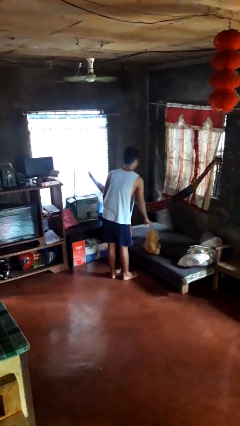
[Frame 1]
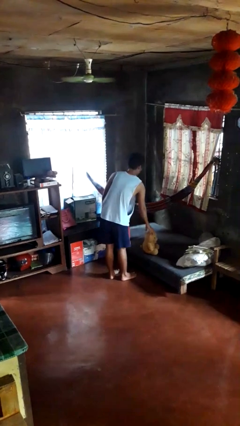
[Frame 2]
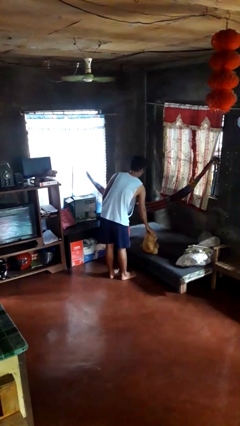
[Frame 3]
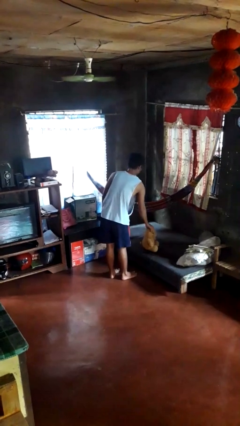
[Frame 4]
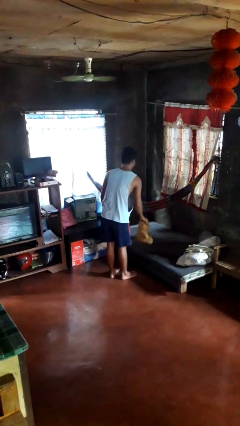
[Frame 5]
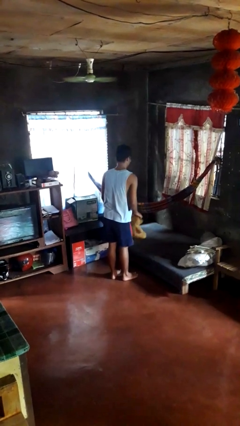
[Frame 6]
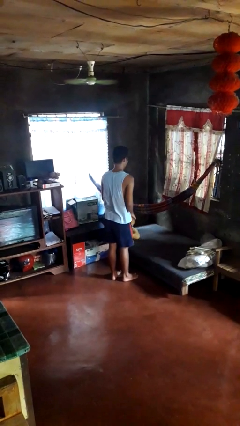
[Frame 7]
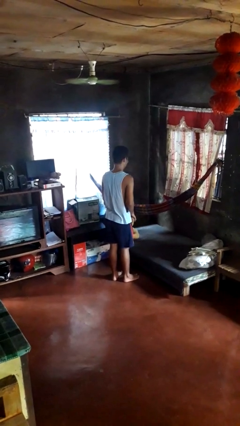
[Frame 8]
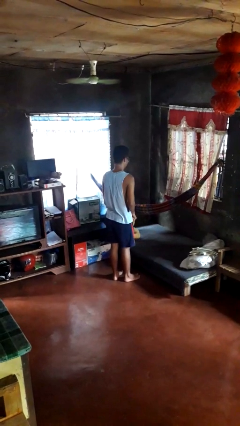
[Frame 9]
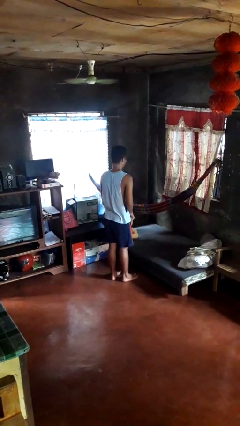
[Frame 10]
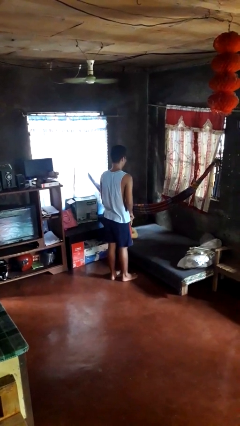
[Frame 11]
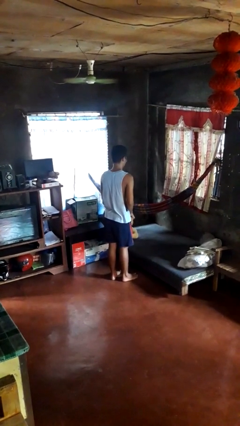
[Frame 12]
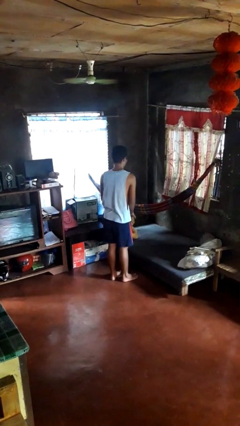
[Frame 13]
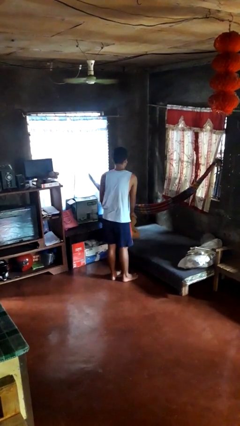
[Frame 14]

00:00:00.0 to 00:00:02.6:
person picks up object from bed

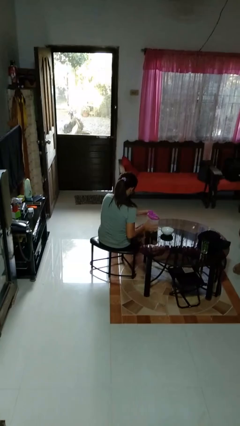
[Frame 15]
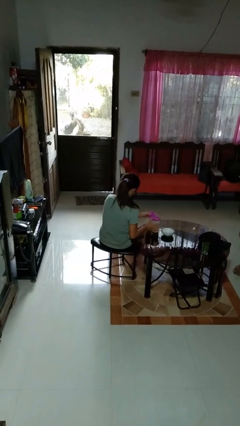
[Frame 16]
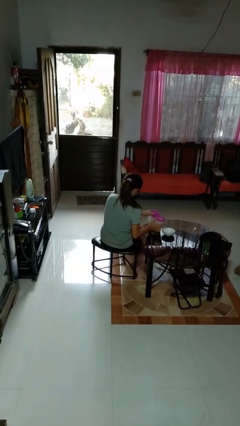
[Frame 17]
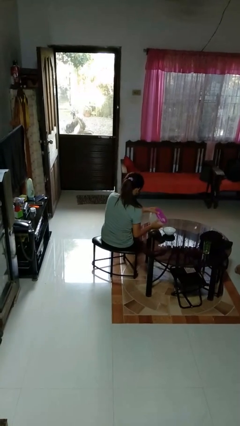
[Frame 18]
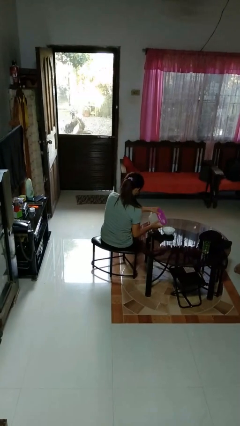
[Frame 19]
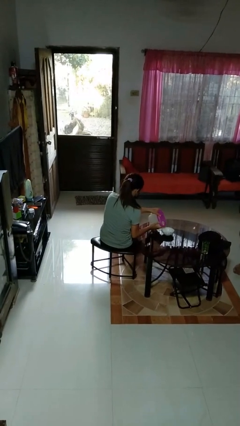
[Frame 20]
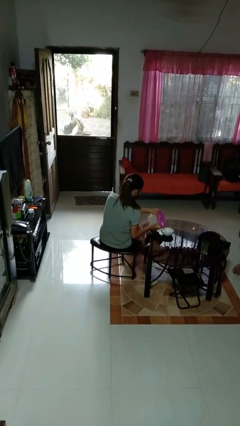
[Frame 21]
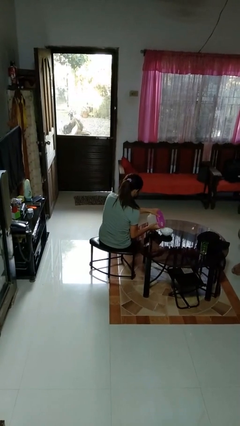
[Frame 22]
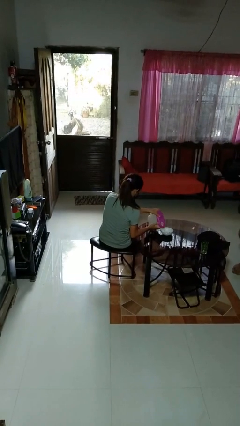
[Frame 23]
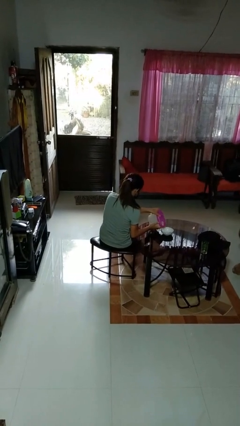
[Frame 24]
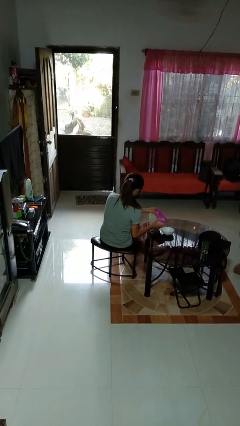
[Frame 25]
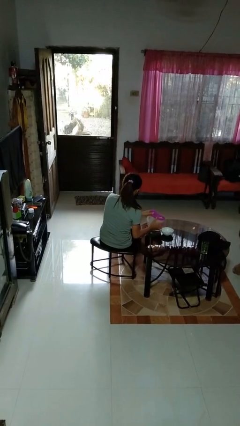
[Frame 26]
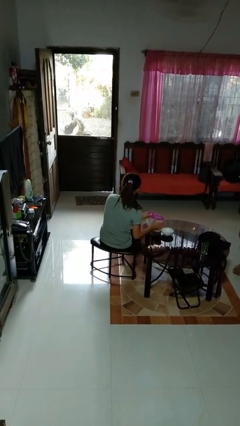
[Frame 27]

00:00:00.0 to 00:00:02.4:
person pours into bowl

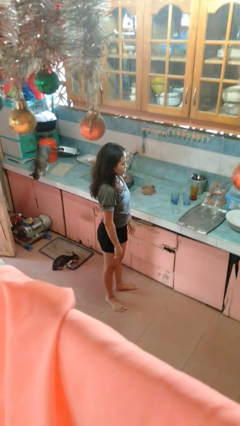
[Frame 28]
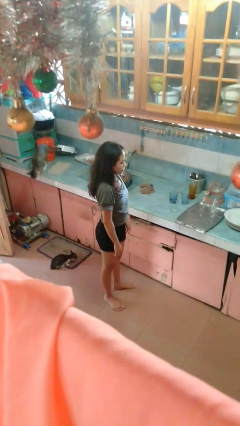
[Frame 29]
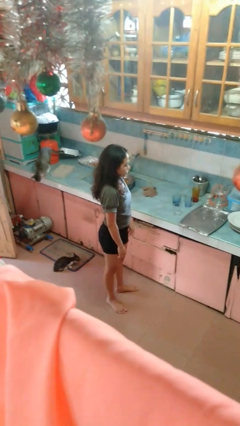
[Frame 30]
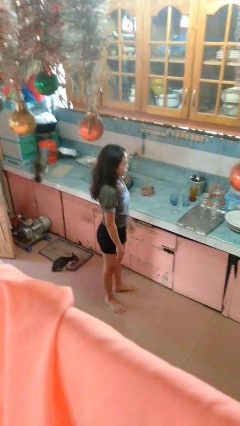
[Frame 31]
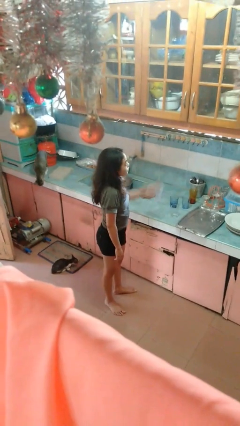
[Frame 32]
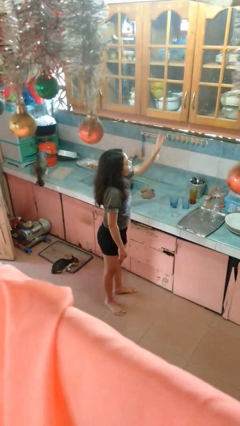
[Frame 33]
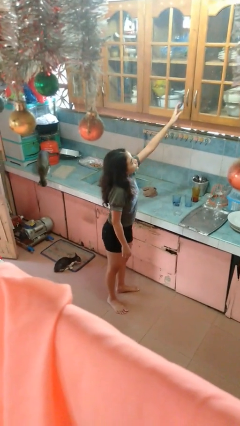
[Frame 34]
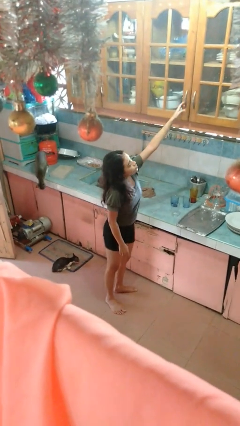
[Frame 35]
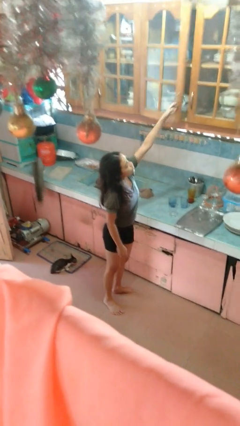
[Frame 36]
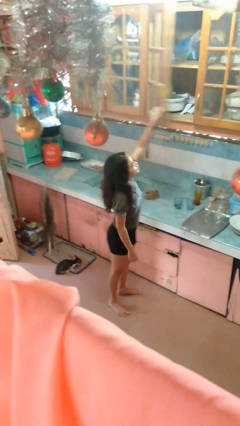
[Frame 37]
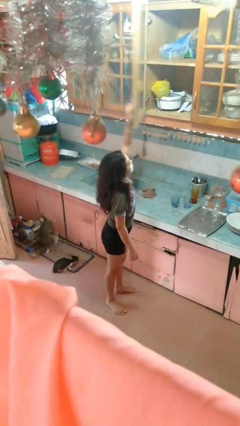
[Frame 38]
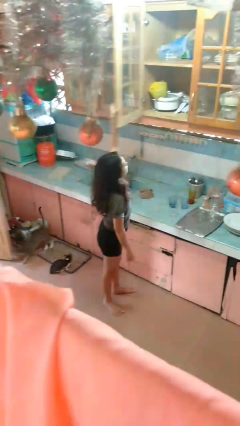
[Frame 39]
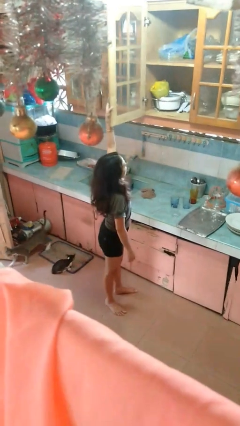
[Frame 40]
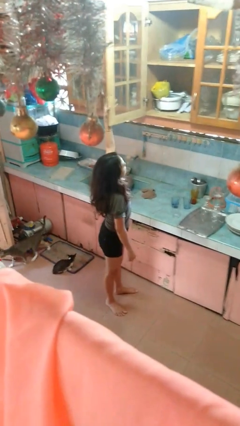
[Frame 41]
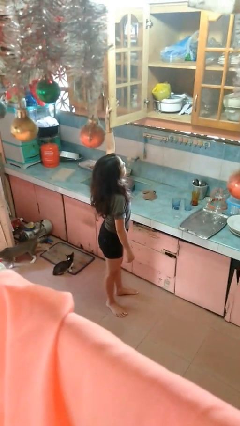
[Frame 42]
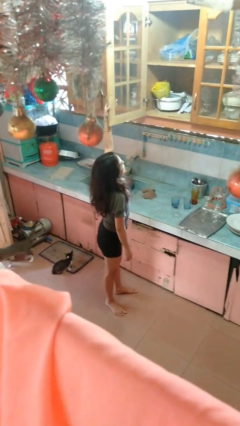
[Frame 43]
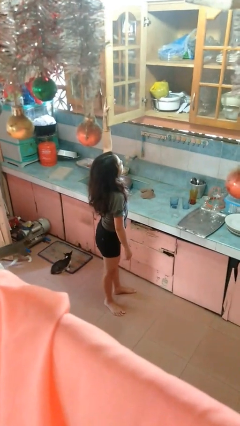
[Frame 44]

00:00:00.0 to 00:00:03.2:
person opens cabinet

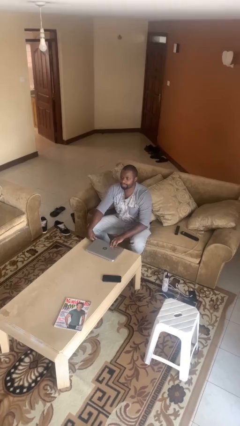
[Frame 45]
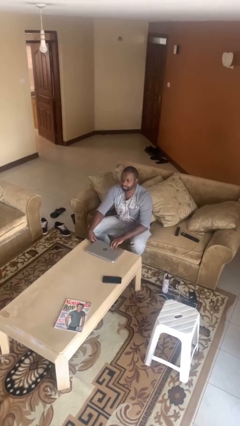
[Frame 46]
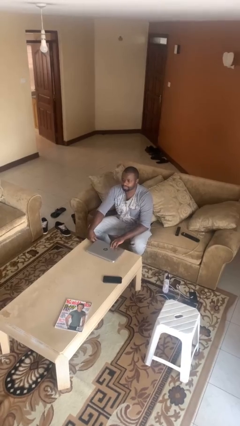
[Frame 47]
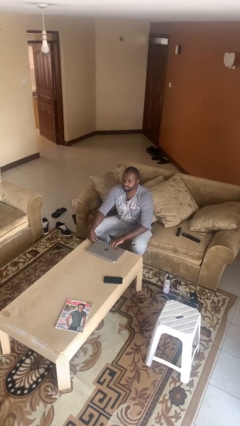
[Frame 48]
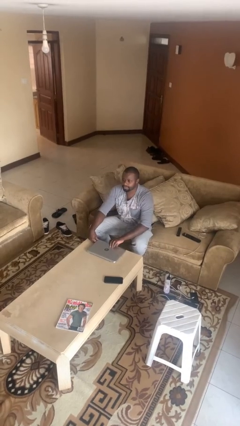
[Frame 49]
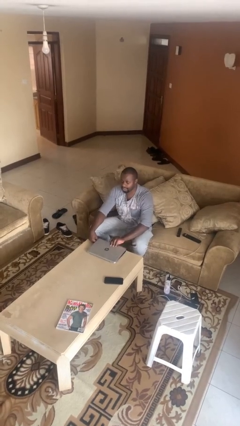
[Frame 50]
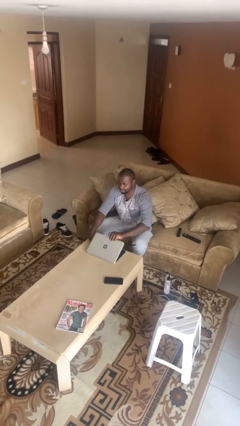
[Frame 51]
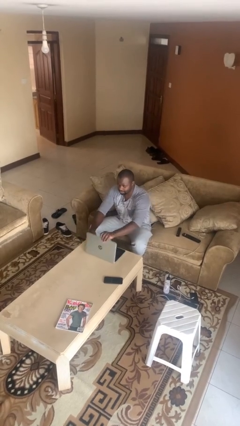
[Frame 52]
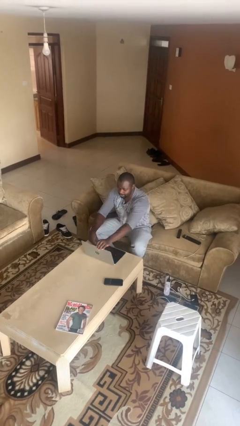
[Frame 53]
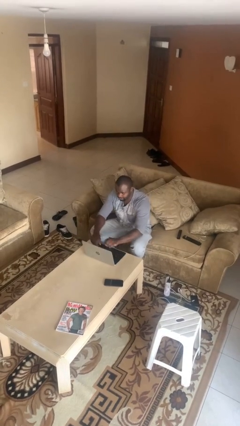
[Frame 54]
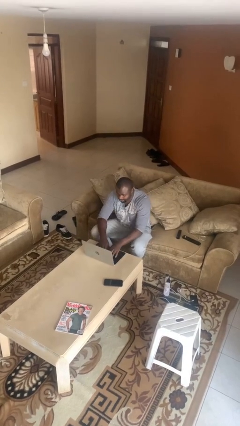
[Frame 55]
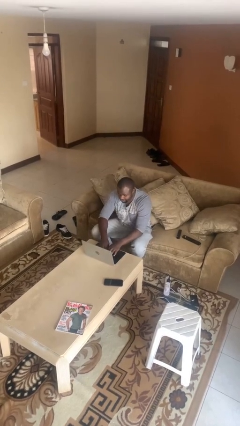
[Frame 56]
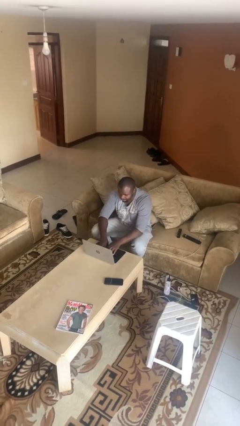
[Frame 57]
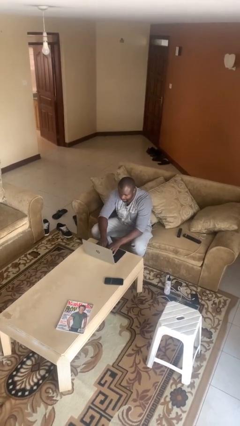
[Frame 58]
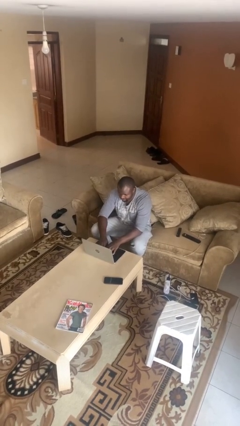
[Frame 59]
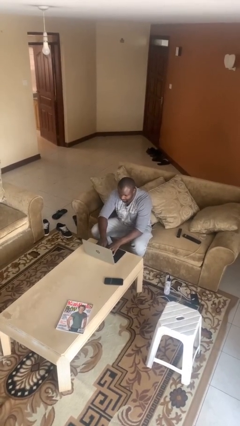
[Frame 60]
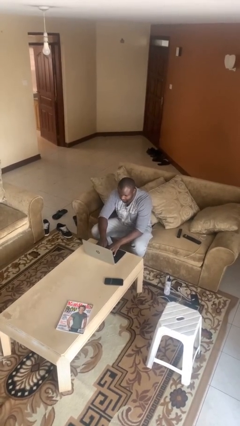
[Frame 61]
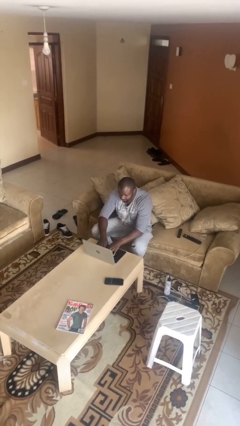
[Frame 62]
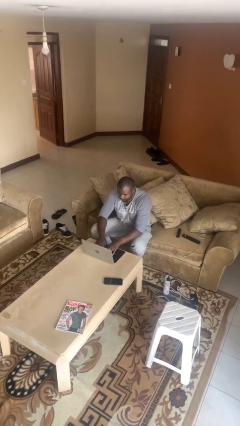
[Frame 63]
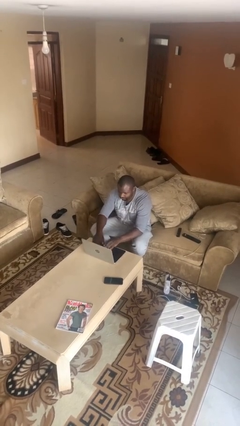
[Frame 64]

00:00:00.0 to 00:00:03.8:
person interacts with laptop

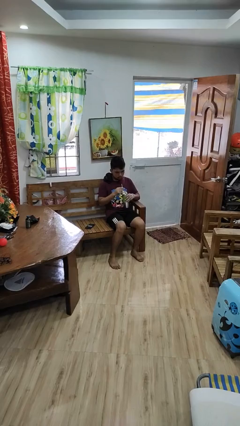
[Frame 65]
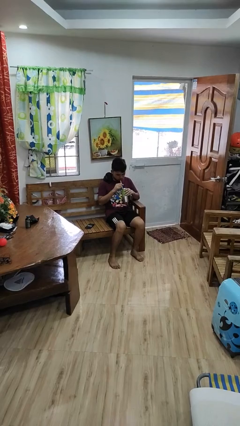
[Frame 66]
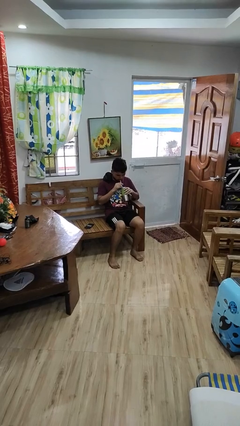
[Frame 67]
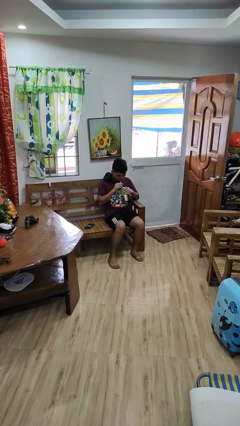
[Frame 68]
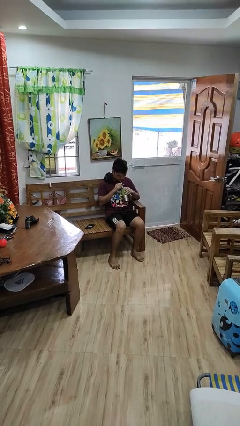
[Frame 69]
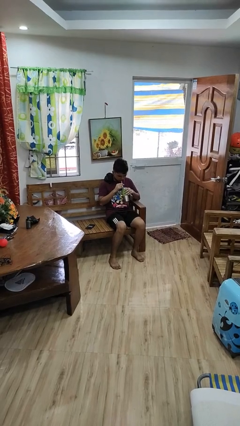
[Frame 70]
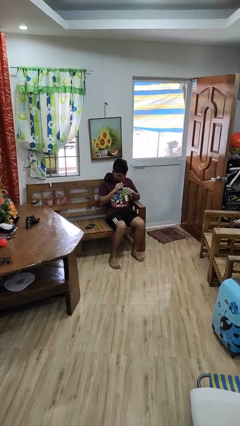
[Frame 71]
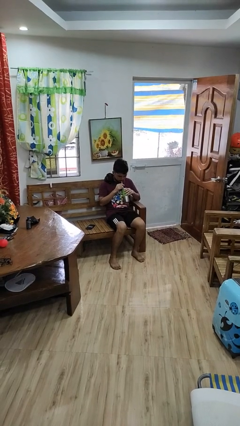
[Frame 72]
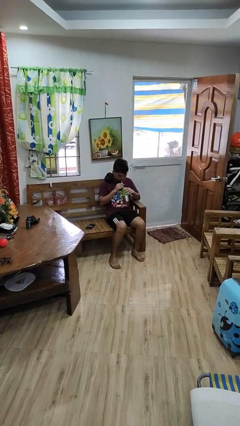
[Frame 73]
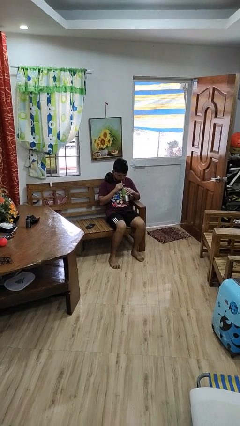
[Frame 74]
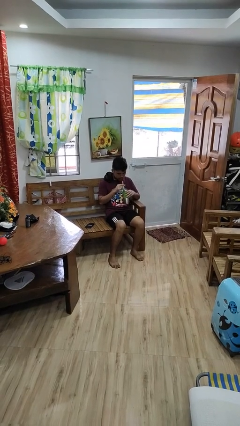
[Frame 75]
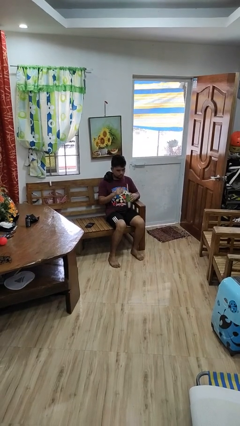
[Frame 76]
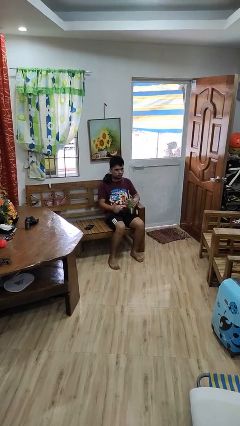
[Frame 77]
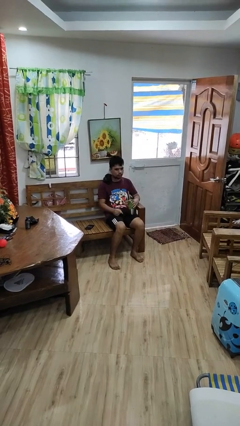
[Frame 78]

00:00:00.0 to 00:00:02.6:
person drinks from straw

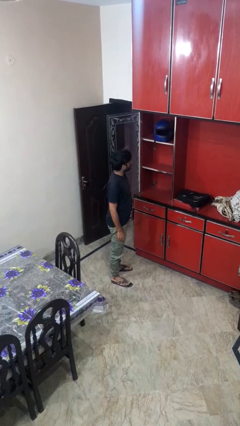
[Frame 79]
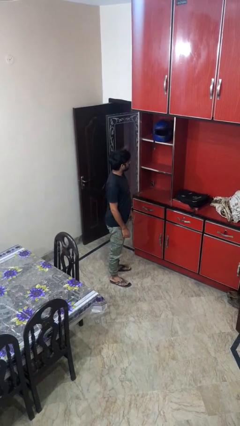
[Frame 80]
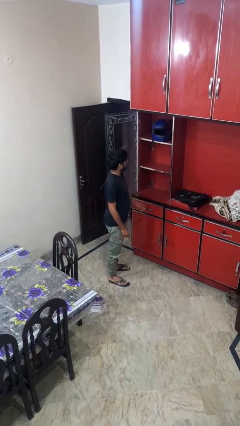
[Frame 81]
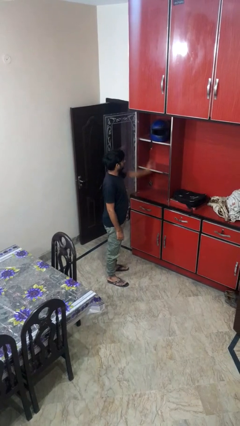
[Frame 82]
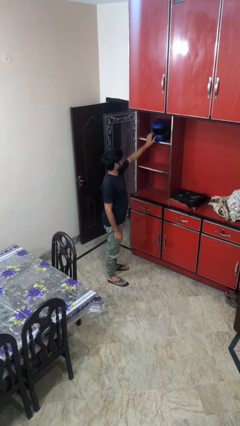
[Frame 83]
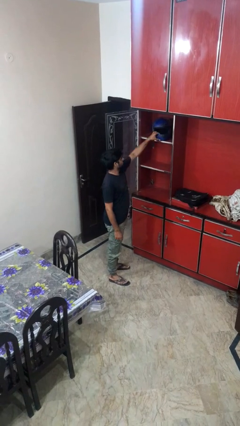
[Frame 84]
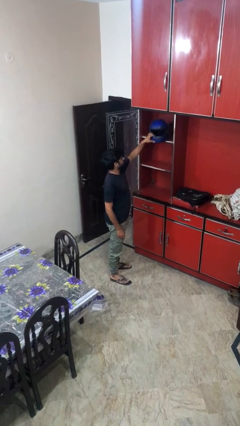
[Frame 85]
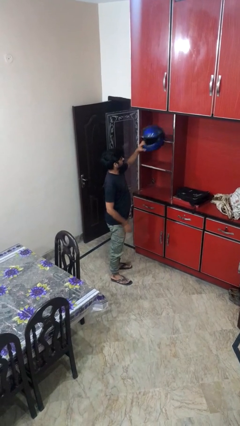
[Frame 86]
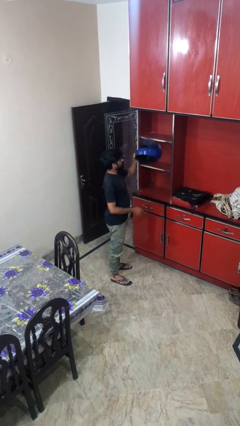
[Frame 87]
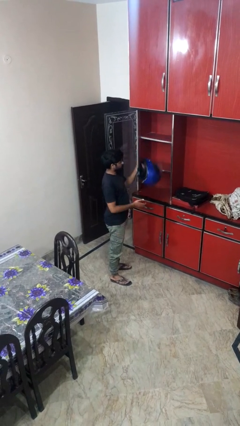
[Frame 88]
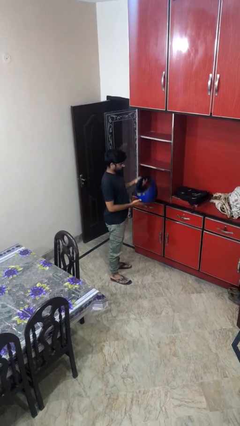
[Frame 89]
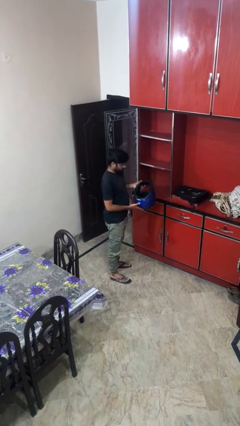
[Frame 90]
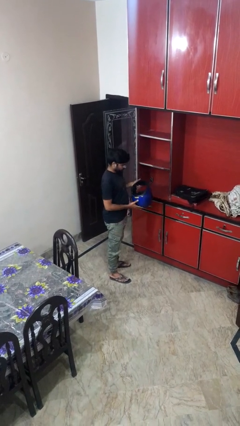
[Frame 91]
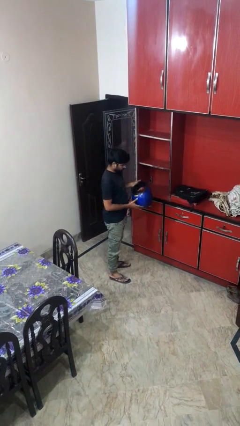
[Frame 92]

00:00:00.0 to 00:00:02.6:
person picks up object from shelf
